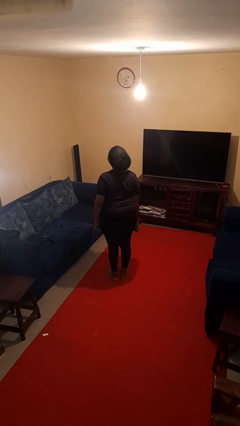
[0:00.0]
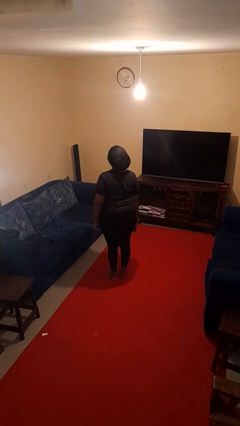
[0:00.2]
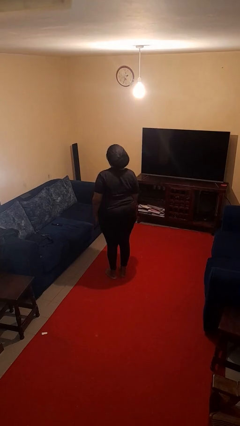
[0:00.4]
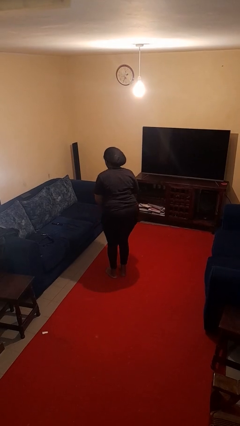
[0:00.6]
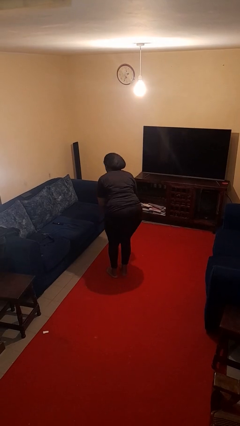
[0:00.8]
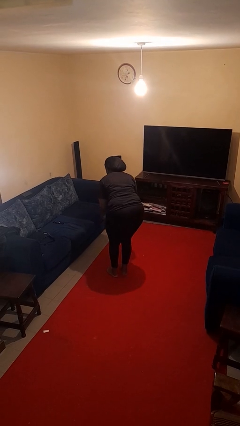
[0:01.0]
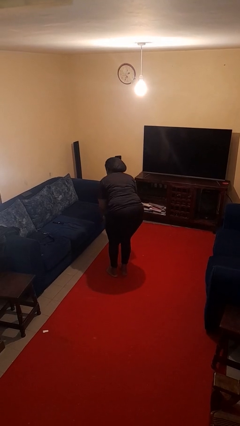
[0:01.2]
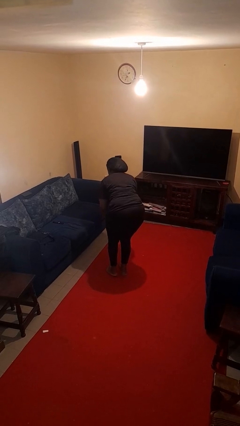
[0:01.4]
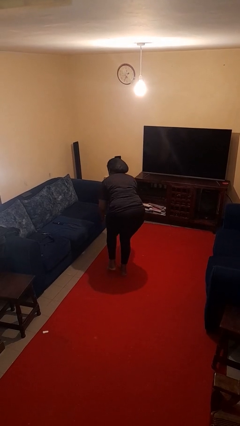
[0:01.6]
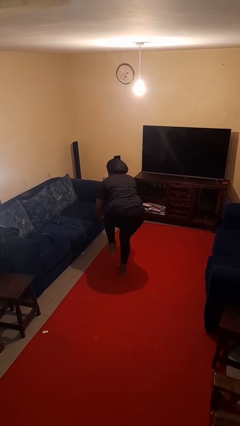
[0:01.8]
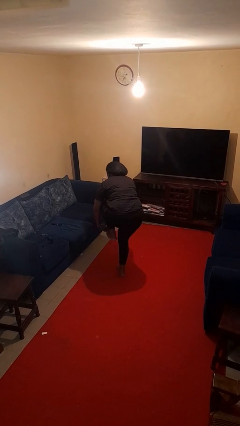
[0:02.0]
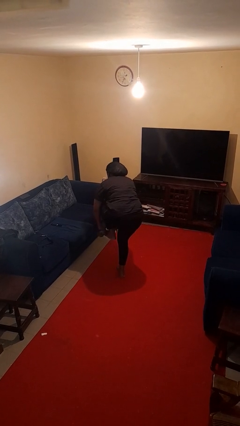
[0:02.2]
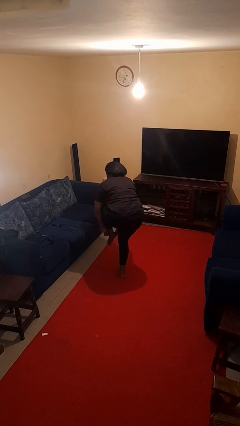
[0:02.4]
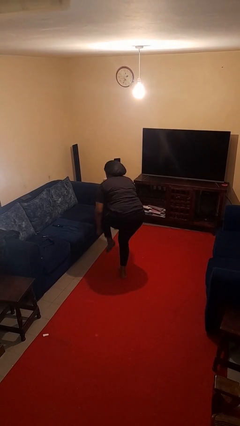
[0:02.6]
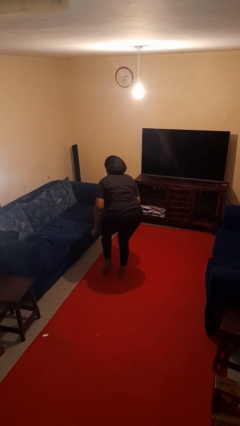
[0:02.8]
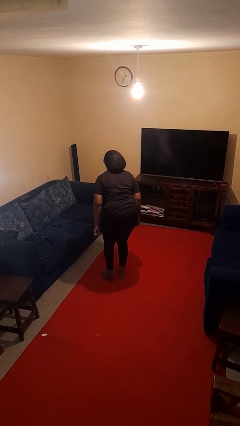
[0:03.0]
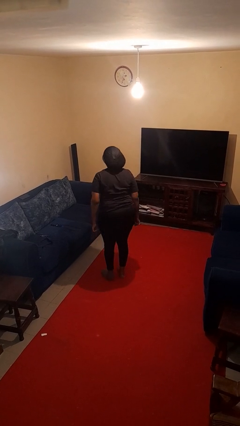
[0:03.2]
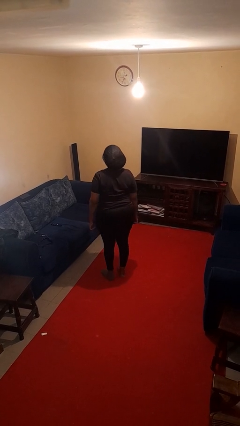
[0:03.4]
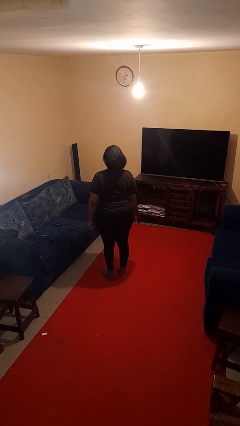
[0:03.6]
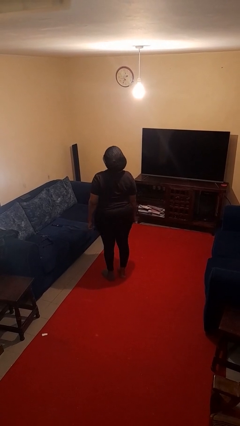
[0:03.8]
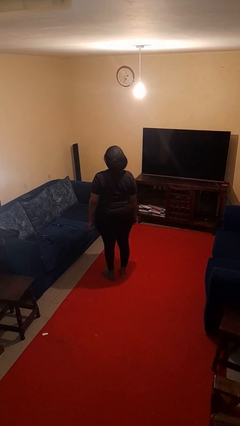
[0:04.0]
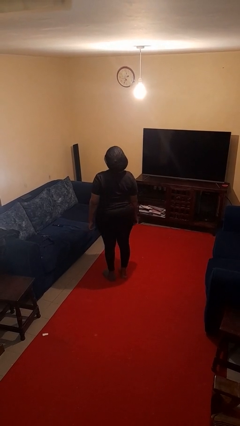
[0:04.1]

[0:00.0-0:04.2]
person puts on socks

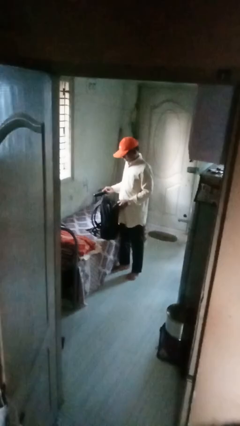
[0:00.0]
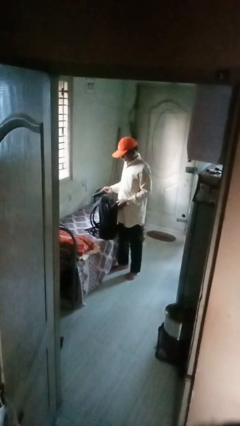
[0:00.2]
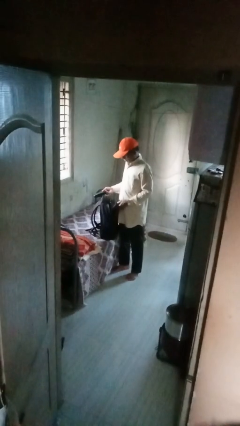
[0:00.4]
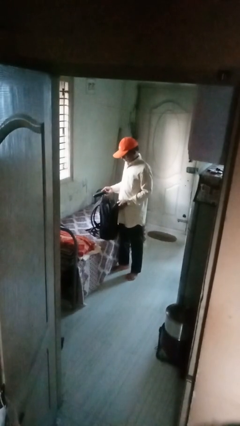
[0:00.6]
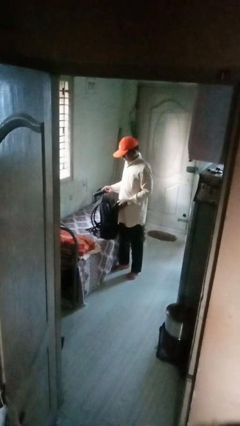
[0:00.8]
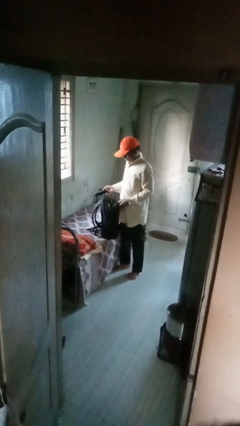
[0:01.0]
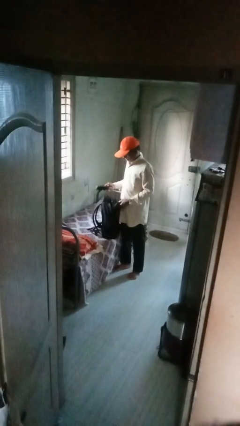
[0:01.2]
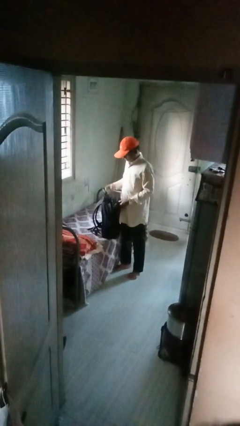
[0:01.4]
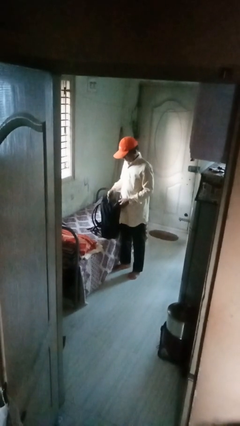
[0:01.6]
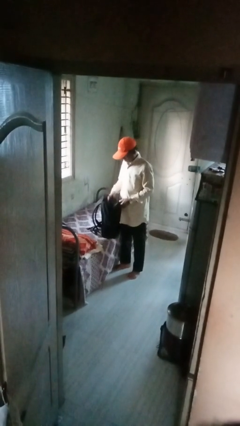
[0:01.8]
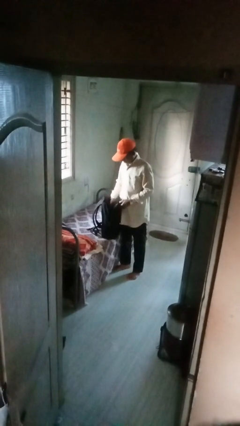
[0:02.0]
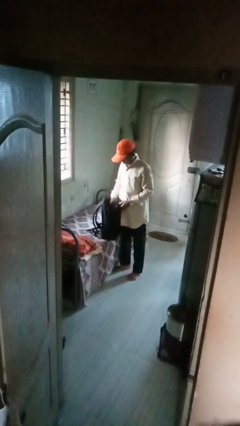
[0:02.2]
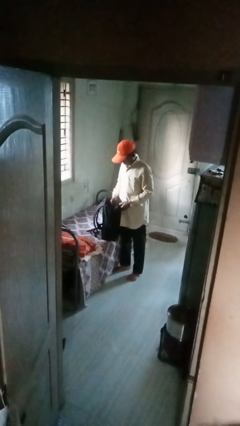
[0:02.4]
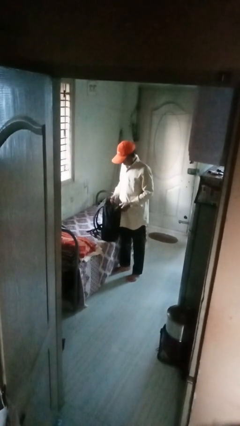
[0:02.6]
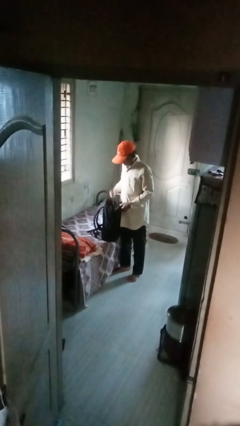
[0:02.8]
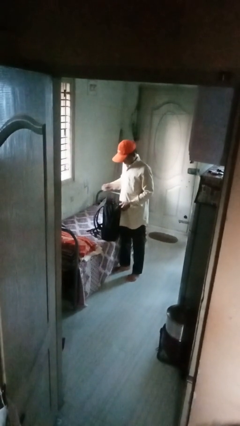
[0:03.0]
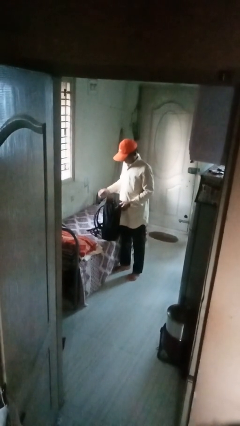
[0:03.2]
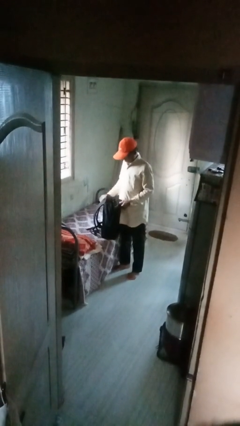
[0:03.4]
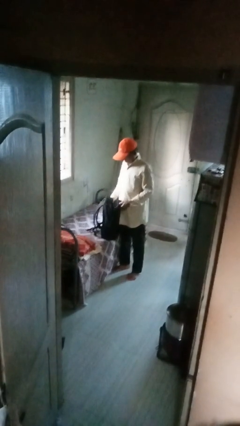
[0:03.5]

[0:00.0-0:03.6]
person puts object into backpack

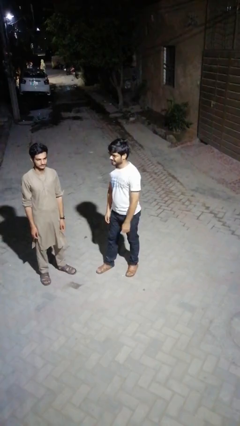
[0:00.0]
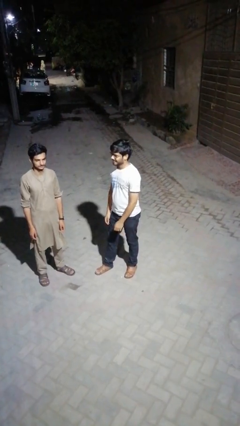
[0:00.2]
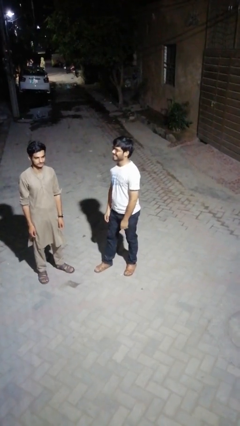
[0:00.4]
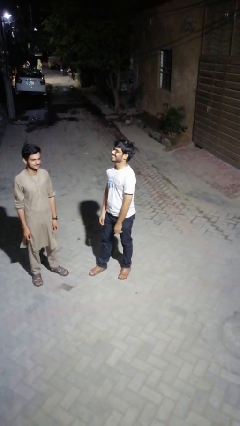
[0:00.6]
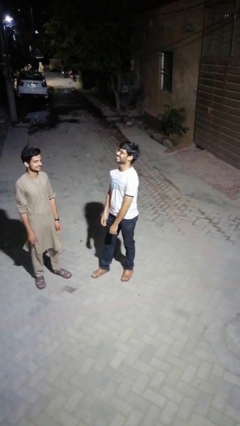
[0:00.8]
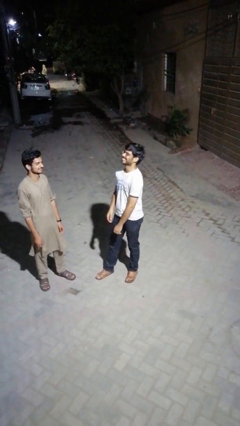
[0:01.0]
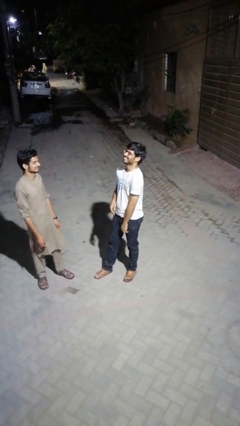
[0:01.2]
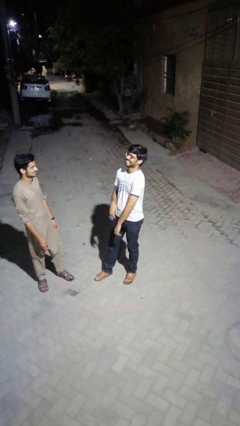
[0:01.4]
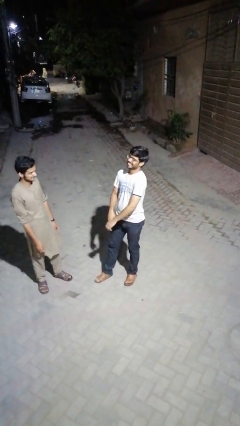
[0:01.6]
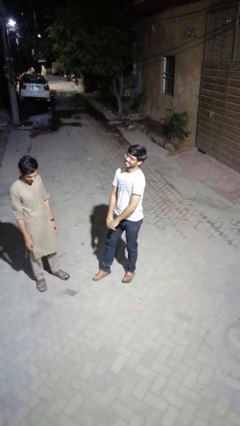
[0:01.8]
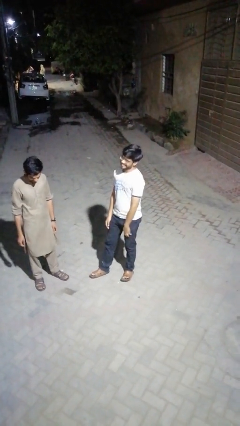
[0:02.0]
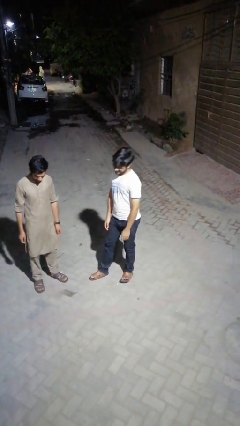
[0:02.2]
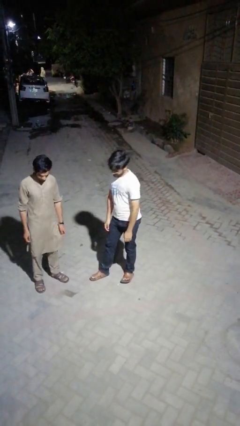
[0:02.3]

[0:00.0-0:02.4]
person laughs with person

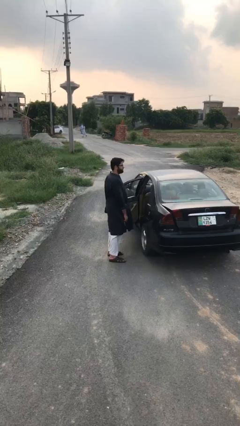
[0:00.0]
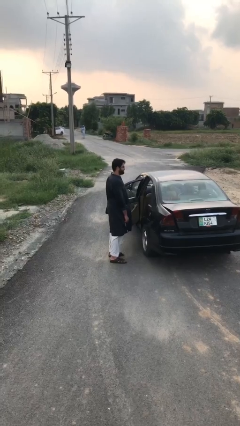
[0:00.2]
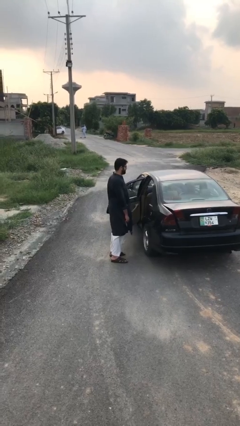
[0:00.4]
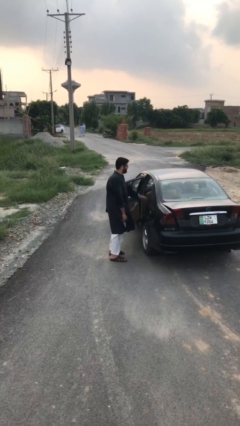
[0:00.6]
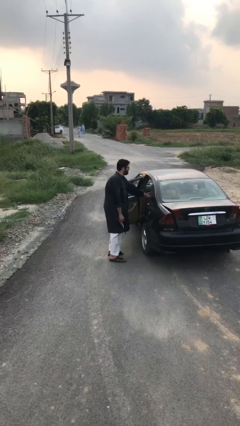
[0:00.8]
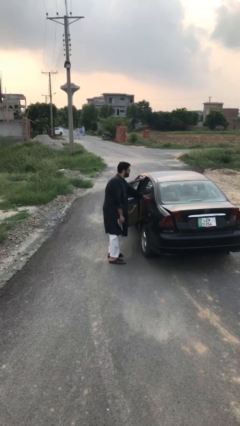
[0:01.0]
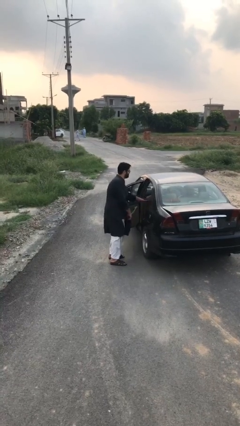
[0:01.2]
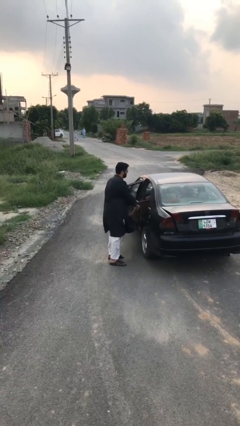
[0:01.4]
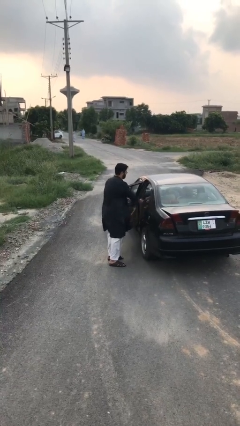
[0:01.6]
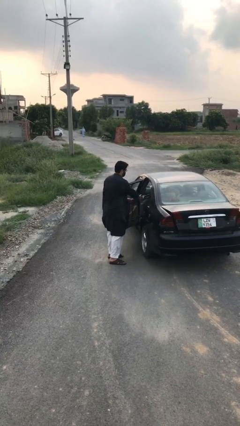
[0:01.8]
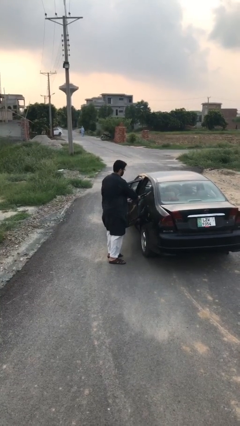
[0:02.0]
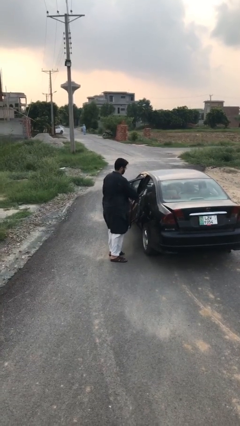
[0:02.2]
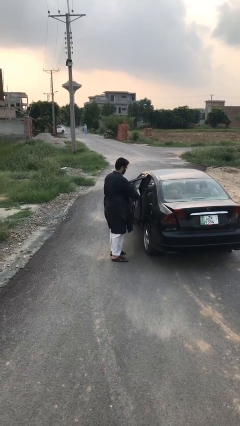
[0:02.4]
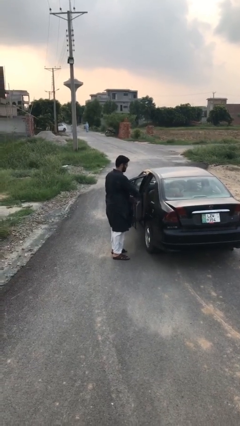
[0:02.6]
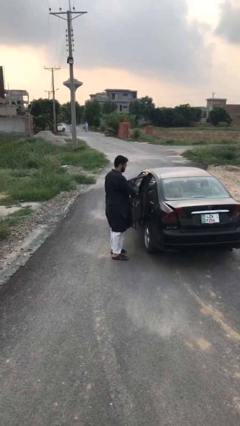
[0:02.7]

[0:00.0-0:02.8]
person unloads car

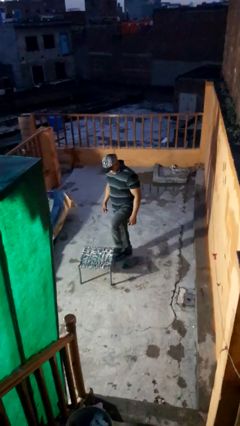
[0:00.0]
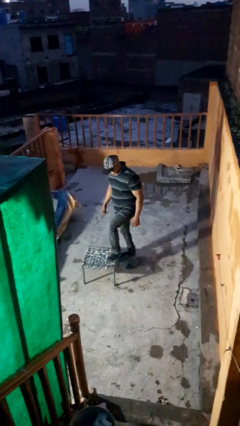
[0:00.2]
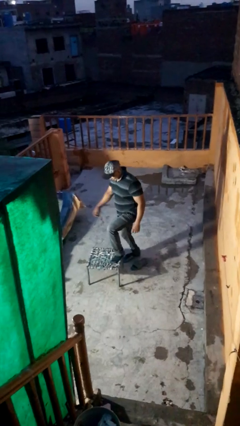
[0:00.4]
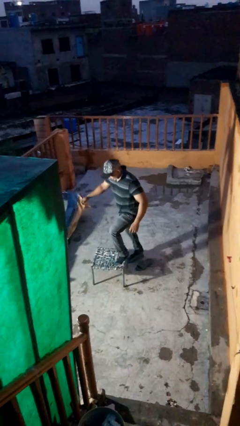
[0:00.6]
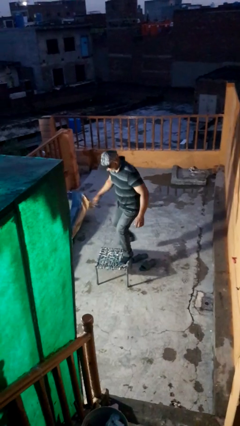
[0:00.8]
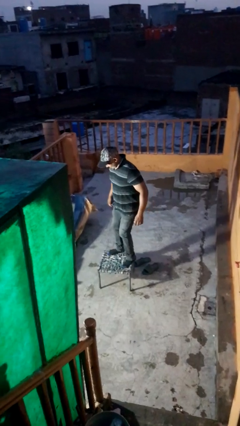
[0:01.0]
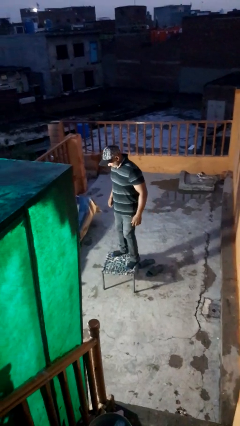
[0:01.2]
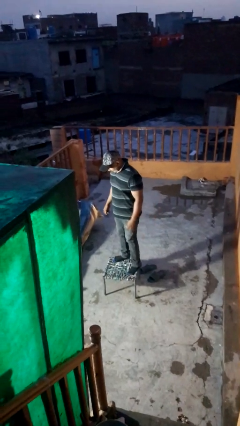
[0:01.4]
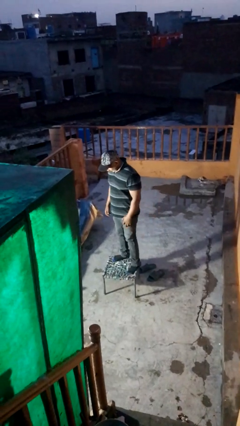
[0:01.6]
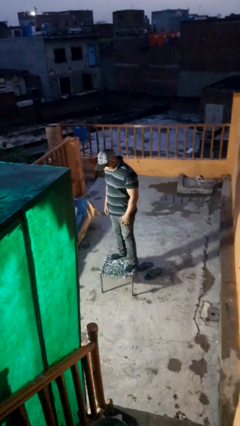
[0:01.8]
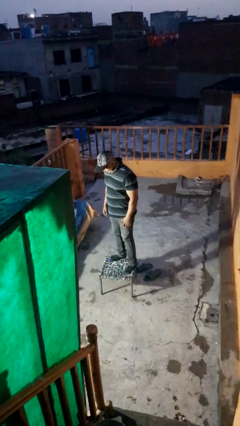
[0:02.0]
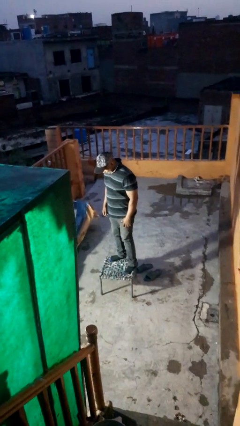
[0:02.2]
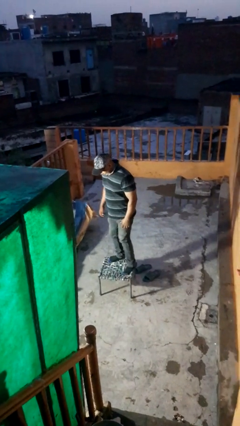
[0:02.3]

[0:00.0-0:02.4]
person climbs on table

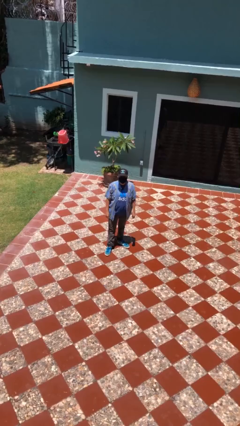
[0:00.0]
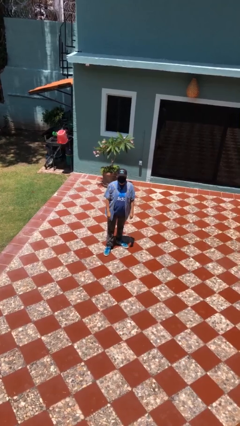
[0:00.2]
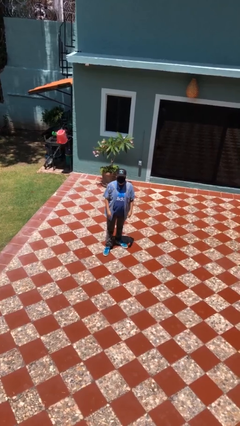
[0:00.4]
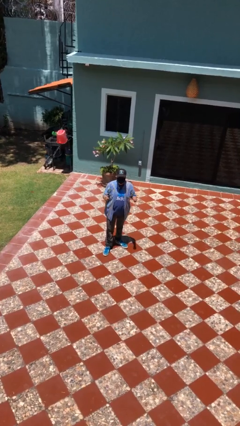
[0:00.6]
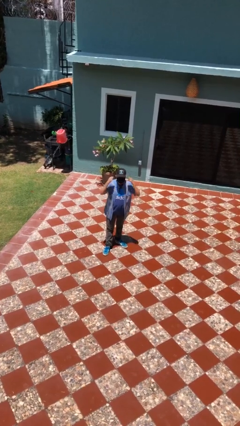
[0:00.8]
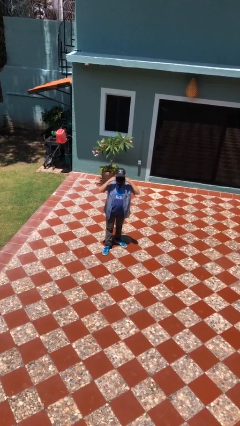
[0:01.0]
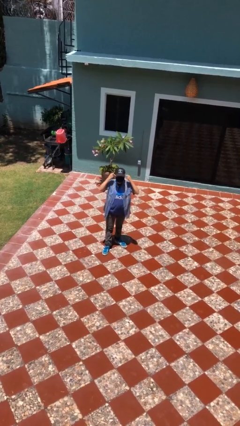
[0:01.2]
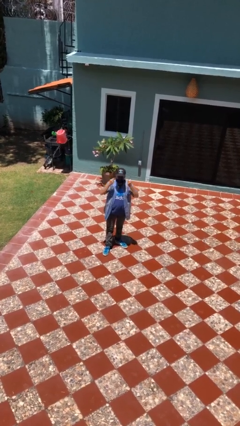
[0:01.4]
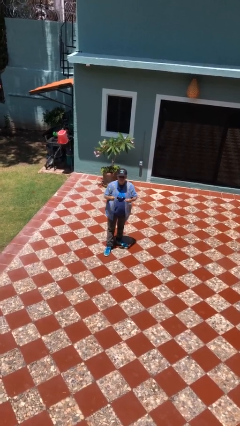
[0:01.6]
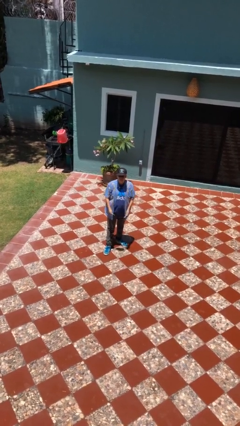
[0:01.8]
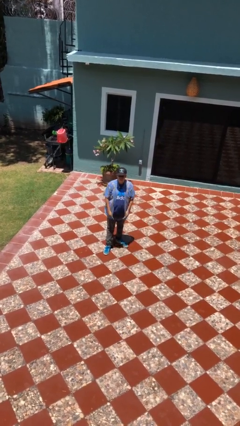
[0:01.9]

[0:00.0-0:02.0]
person takes off facemask

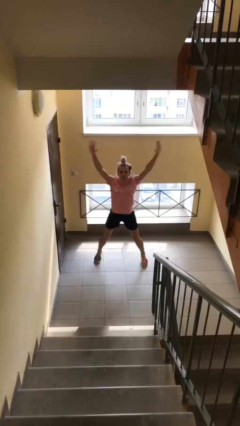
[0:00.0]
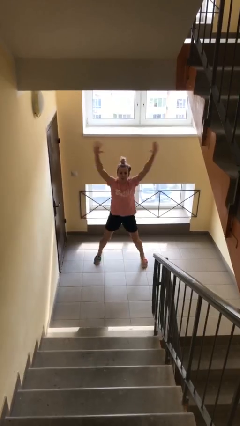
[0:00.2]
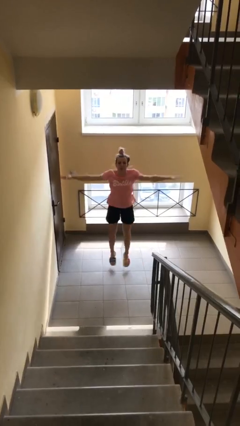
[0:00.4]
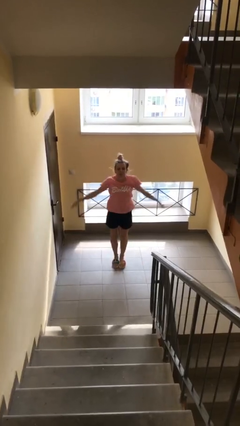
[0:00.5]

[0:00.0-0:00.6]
person exercises with jumping jacks
